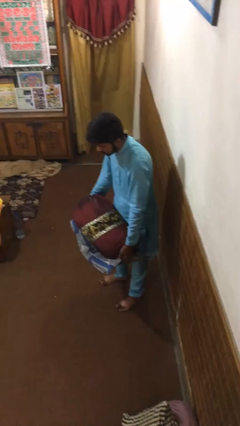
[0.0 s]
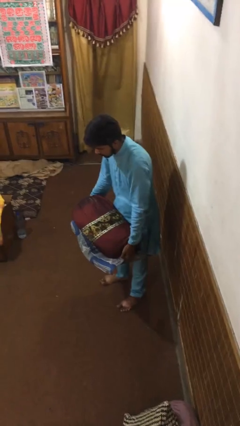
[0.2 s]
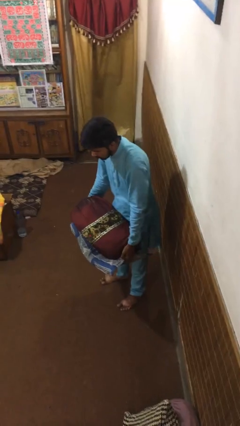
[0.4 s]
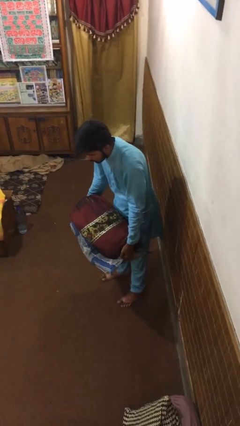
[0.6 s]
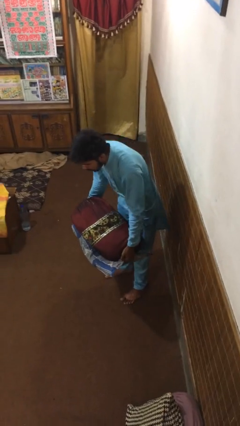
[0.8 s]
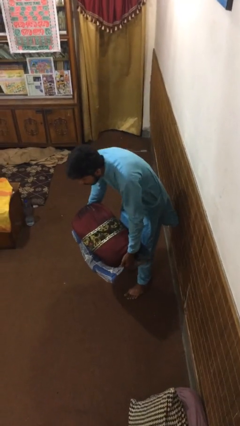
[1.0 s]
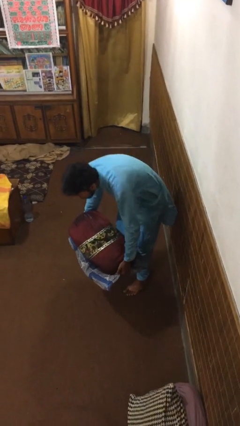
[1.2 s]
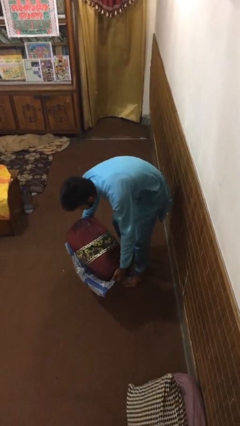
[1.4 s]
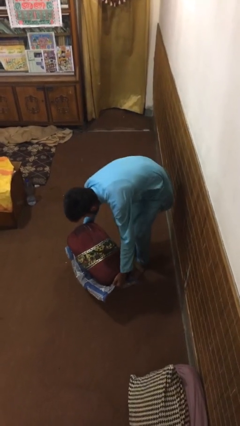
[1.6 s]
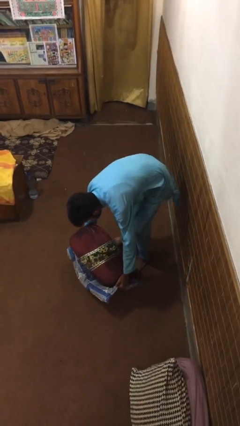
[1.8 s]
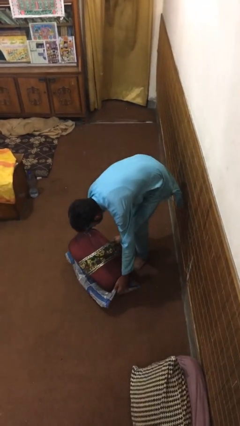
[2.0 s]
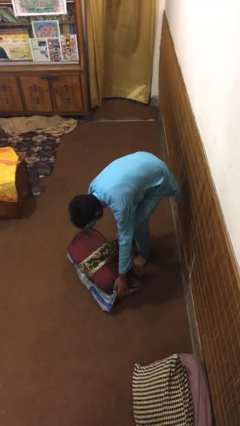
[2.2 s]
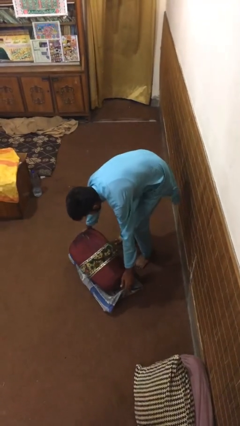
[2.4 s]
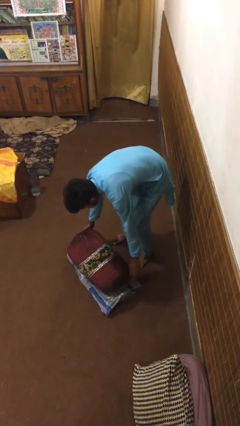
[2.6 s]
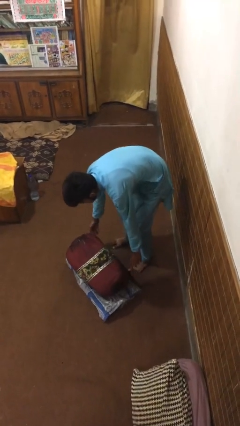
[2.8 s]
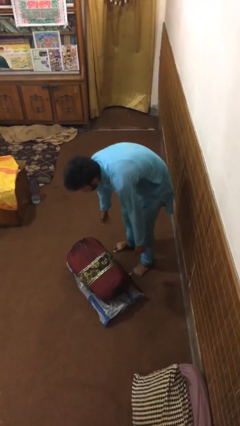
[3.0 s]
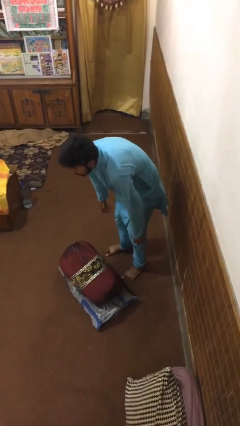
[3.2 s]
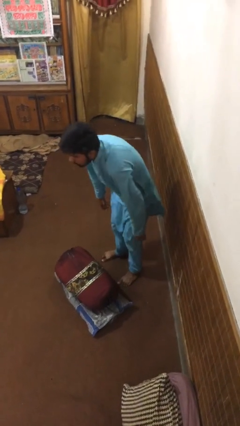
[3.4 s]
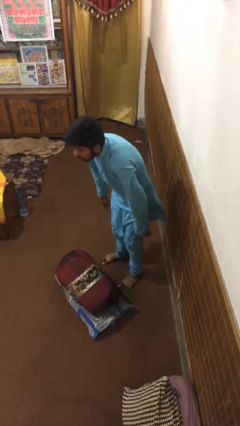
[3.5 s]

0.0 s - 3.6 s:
person puts down object on floor

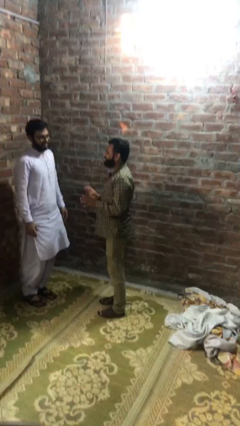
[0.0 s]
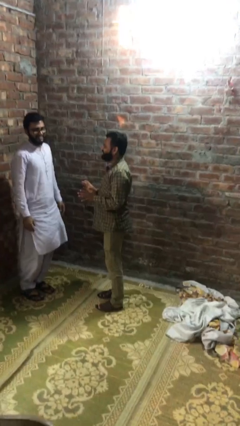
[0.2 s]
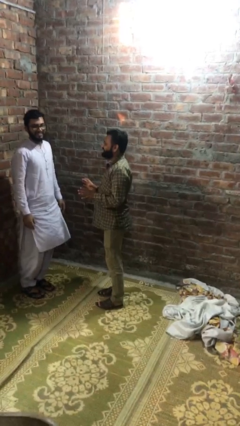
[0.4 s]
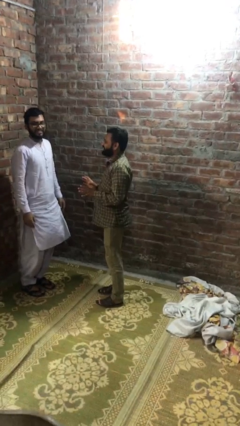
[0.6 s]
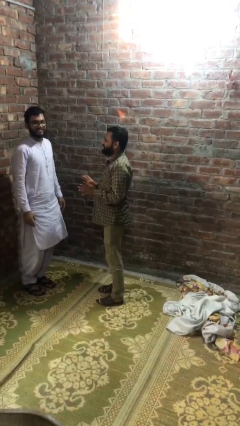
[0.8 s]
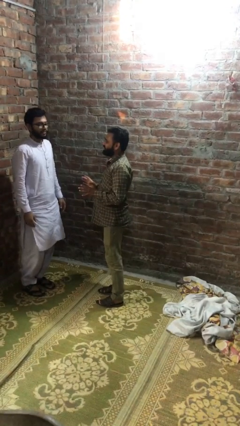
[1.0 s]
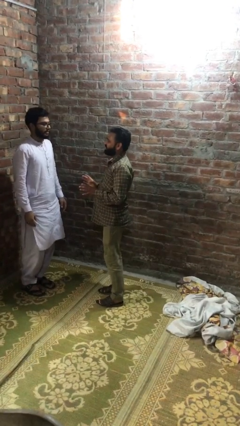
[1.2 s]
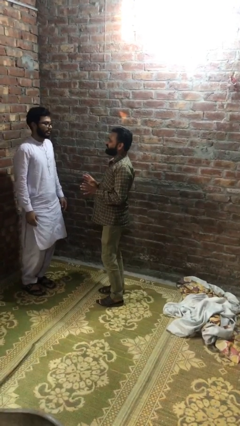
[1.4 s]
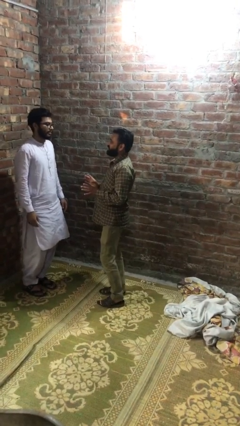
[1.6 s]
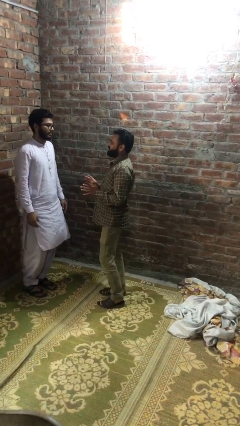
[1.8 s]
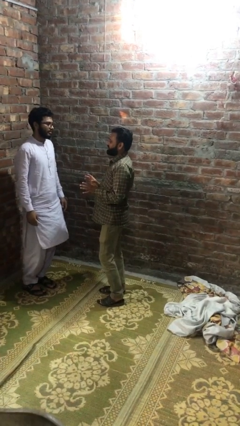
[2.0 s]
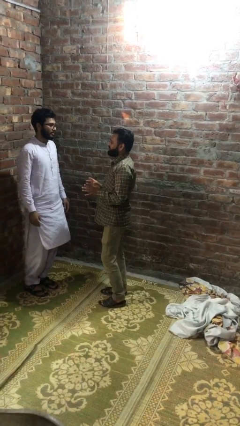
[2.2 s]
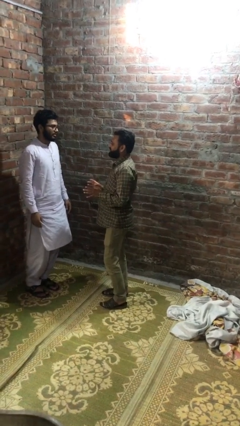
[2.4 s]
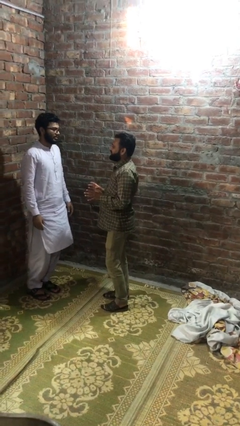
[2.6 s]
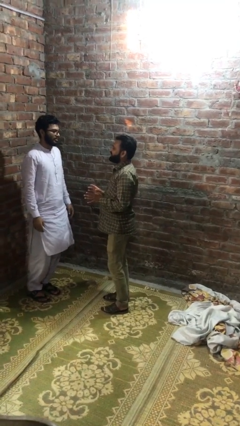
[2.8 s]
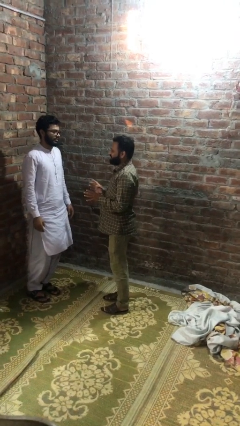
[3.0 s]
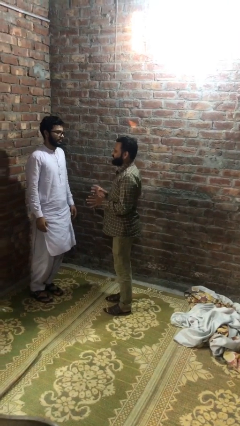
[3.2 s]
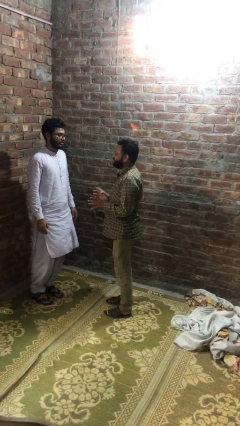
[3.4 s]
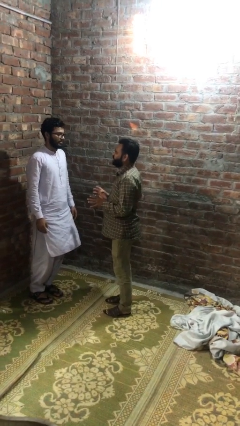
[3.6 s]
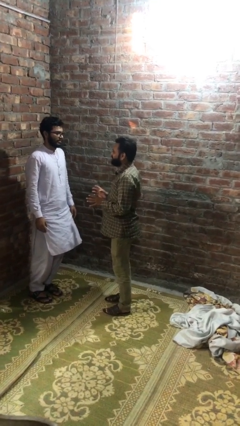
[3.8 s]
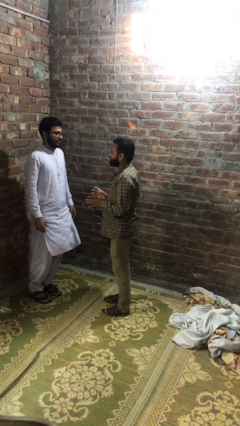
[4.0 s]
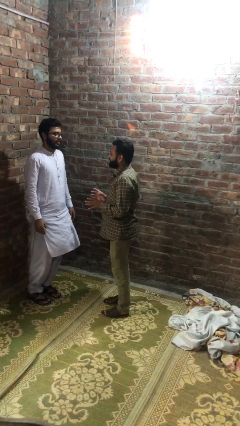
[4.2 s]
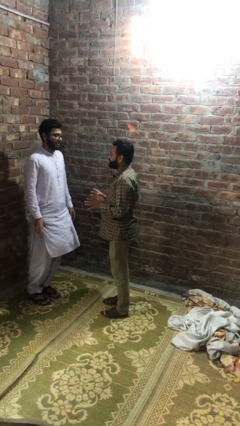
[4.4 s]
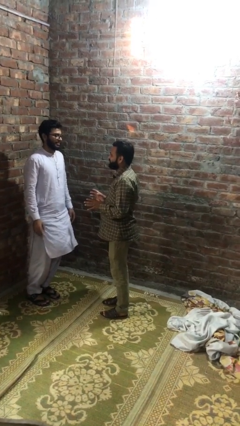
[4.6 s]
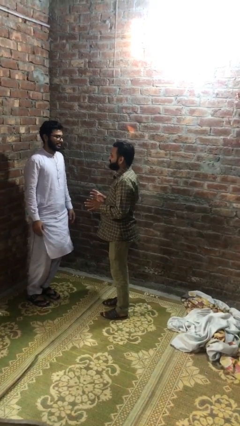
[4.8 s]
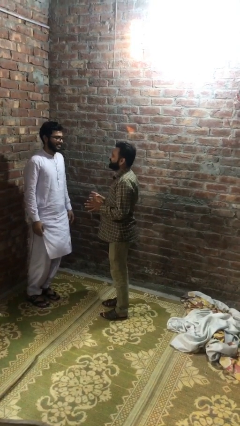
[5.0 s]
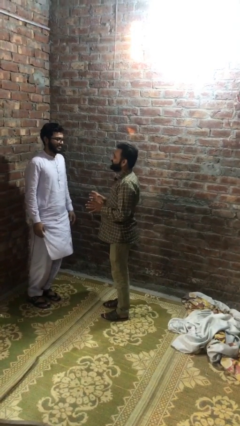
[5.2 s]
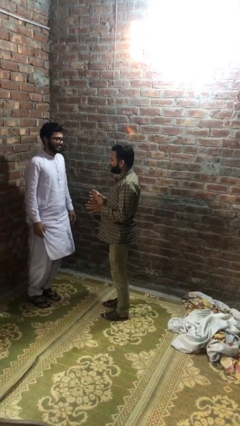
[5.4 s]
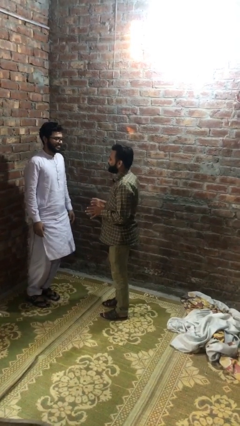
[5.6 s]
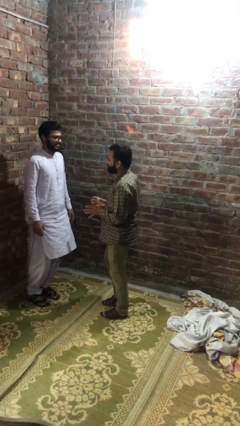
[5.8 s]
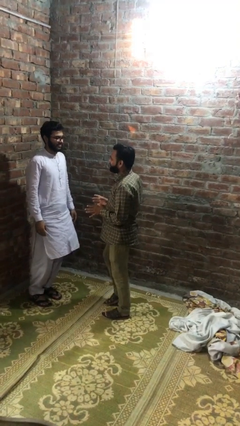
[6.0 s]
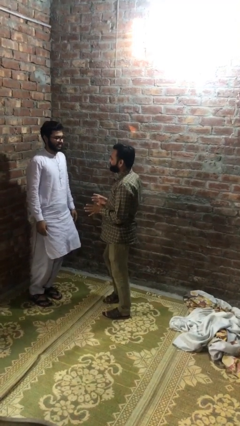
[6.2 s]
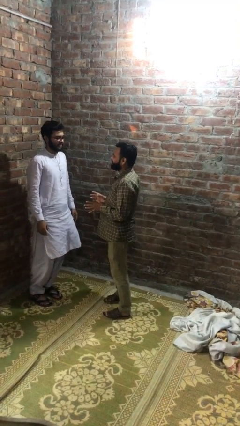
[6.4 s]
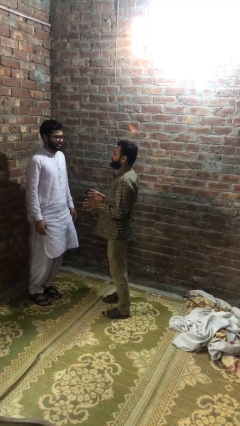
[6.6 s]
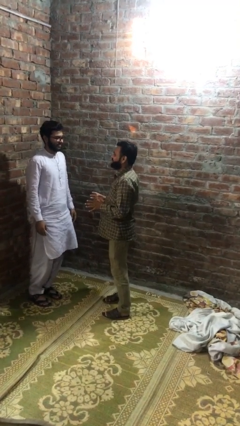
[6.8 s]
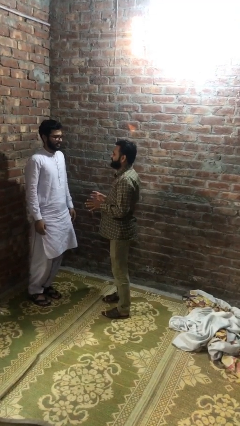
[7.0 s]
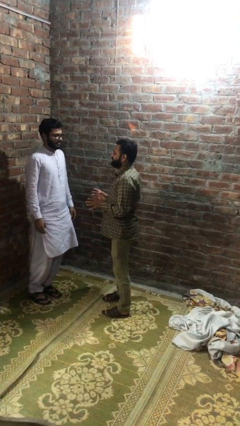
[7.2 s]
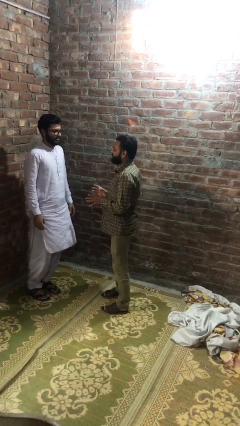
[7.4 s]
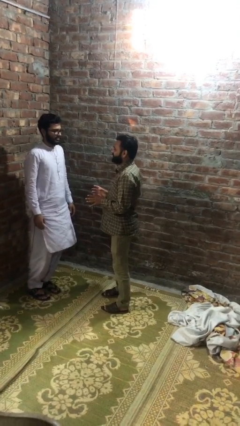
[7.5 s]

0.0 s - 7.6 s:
person talks to person

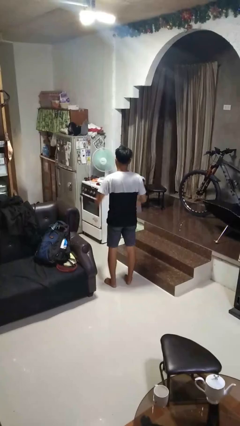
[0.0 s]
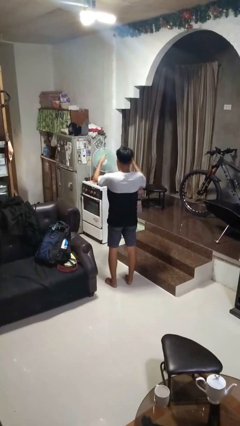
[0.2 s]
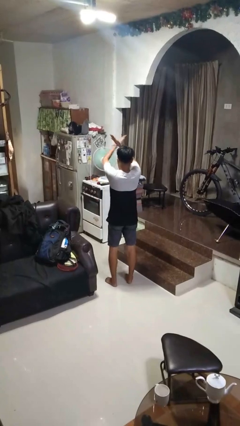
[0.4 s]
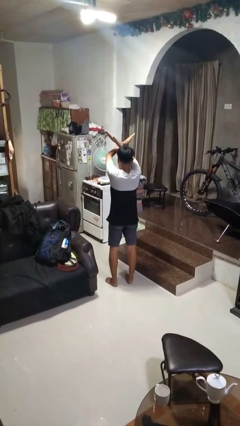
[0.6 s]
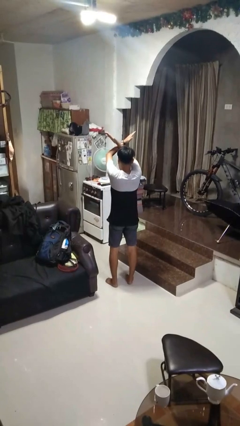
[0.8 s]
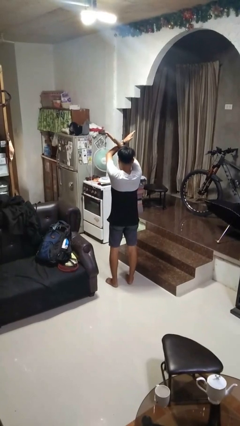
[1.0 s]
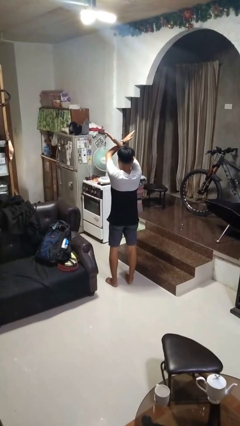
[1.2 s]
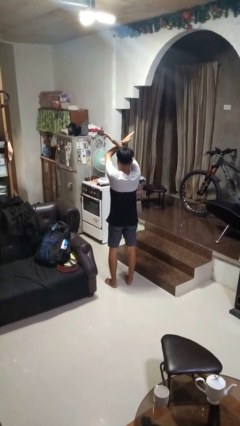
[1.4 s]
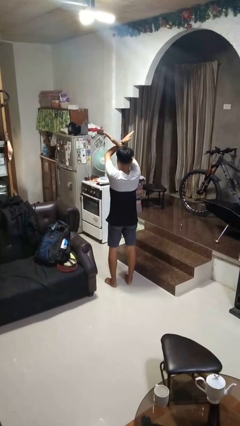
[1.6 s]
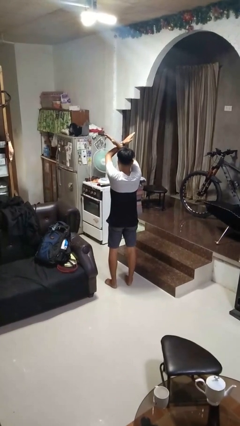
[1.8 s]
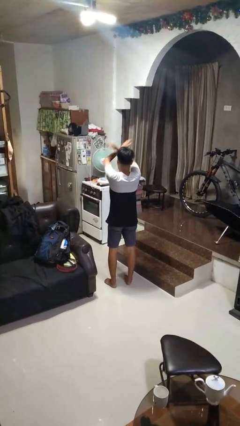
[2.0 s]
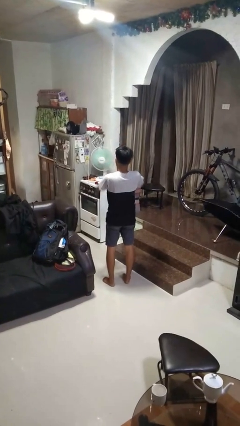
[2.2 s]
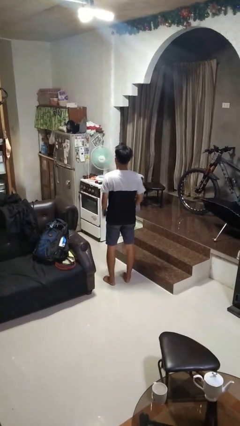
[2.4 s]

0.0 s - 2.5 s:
person gestures arms x

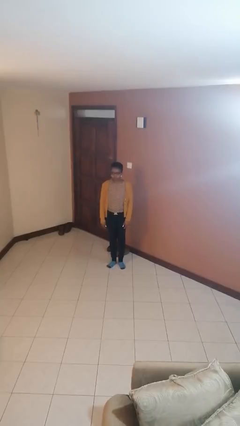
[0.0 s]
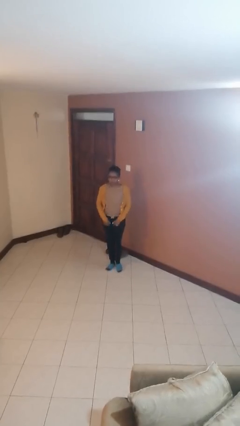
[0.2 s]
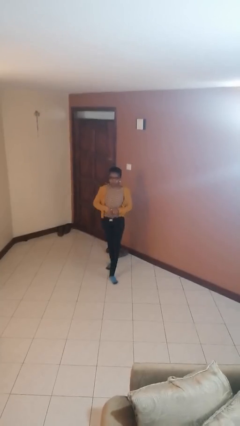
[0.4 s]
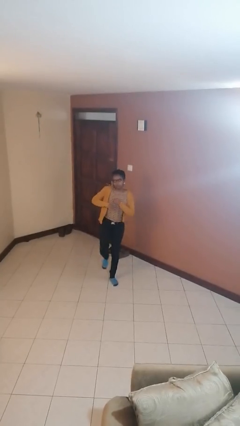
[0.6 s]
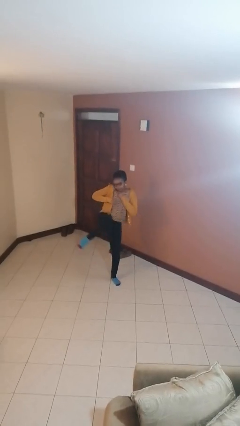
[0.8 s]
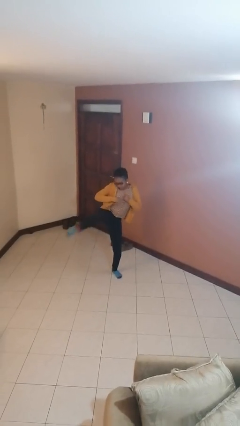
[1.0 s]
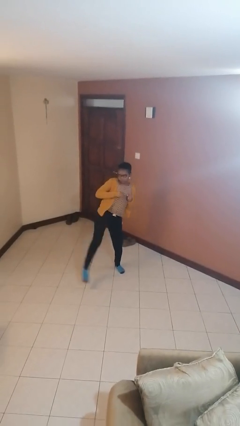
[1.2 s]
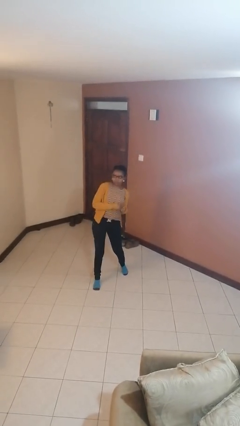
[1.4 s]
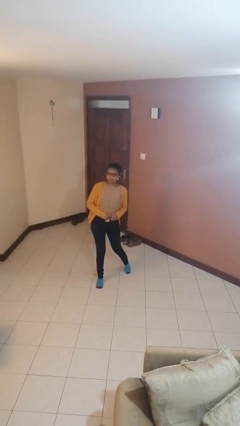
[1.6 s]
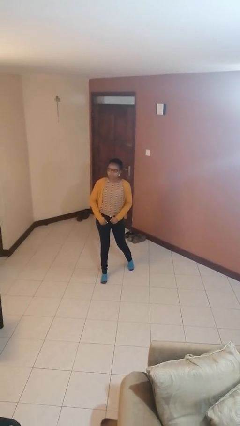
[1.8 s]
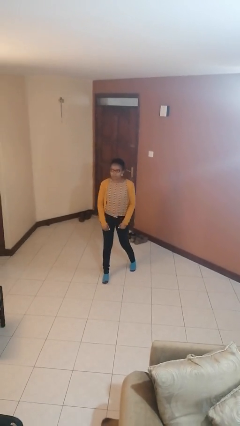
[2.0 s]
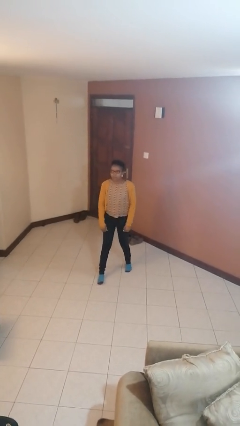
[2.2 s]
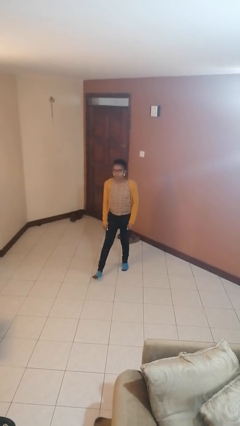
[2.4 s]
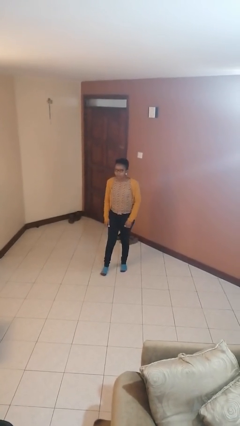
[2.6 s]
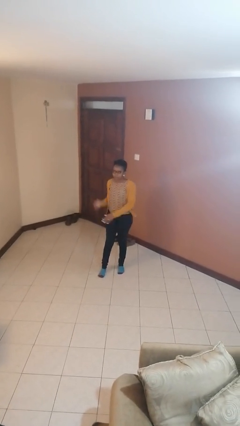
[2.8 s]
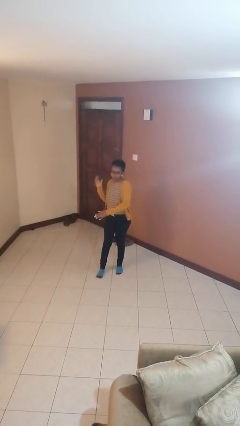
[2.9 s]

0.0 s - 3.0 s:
person karate kicks

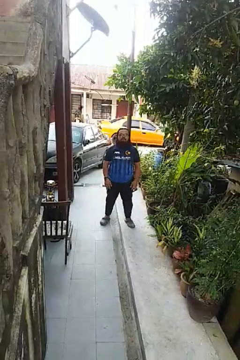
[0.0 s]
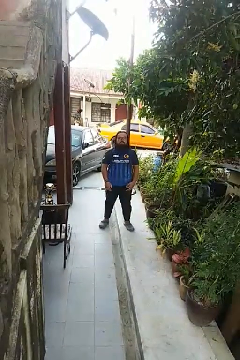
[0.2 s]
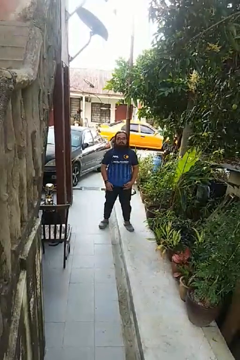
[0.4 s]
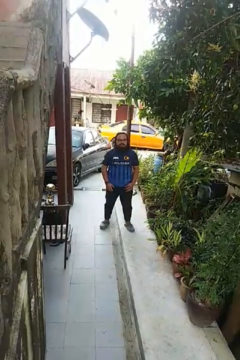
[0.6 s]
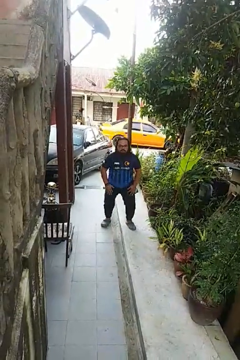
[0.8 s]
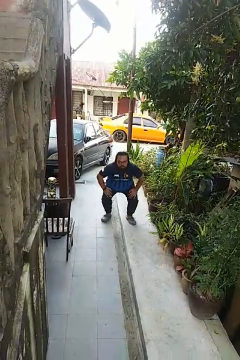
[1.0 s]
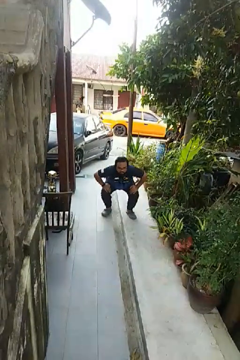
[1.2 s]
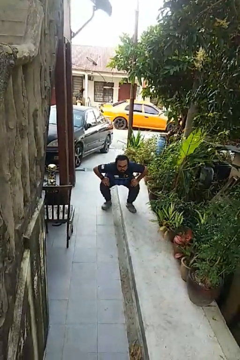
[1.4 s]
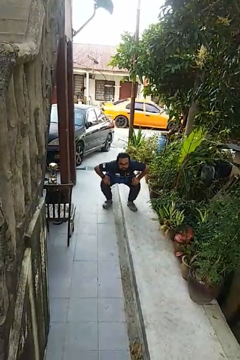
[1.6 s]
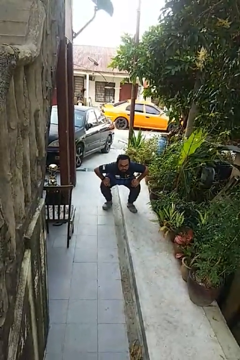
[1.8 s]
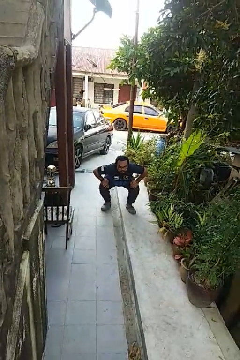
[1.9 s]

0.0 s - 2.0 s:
person squats
